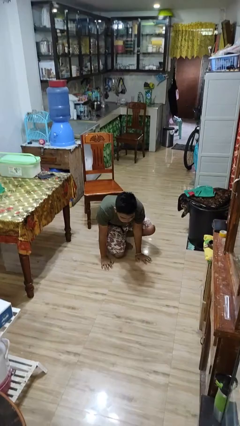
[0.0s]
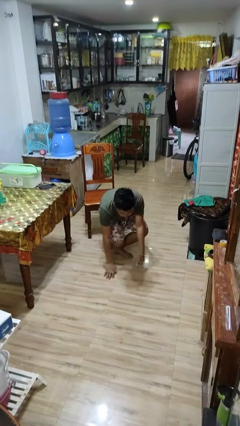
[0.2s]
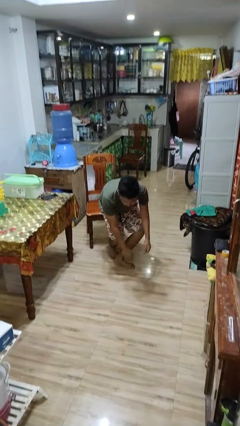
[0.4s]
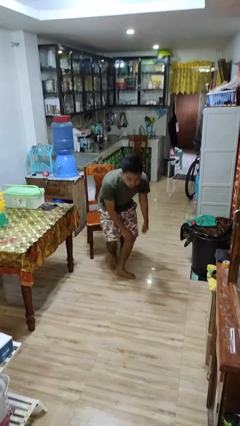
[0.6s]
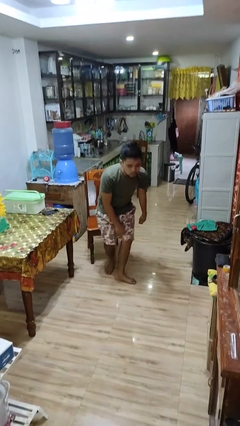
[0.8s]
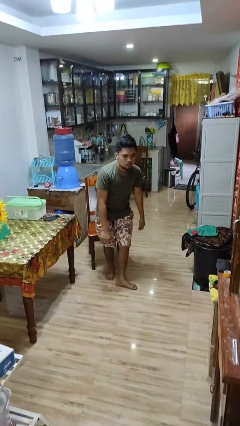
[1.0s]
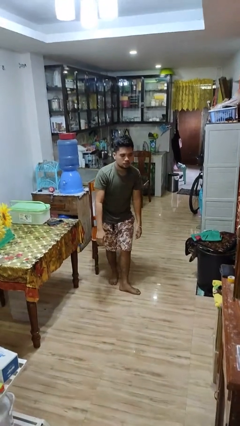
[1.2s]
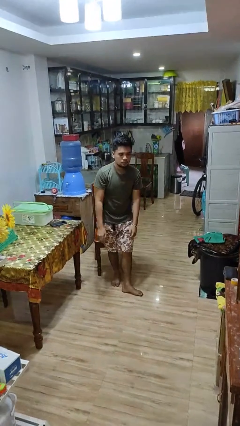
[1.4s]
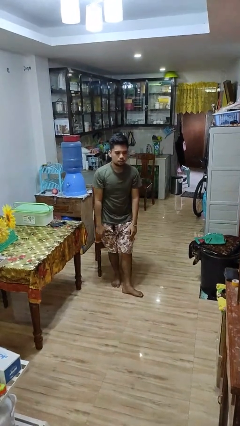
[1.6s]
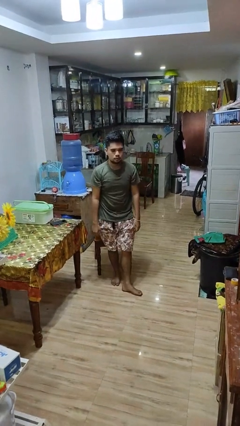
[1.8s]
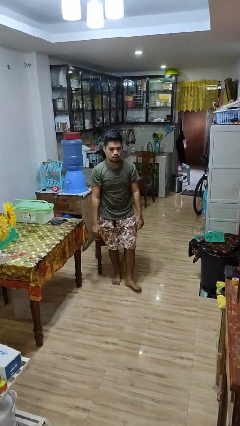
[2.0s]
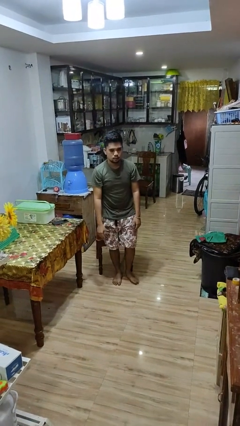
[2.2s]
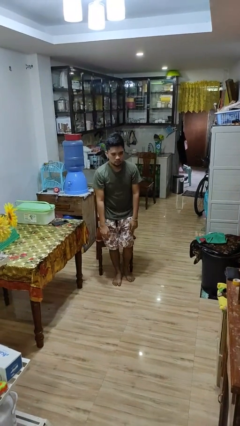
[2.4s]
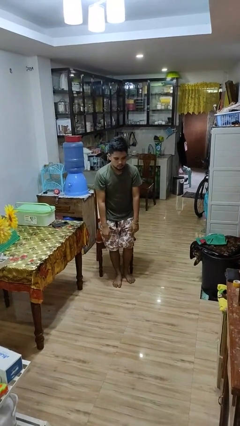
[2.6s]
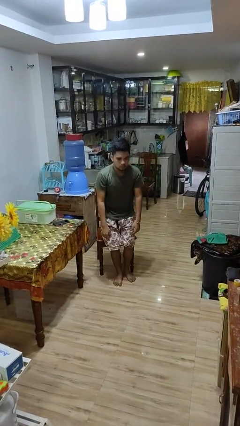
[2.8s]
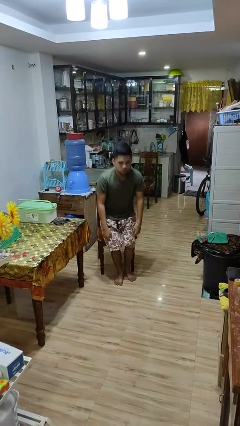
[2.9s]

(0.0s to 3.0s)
person stands up from floor

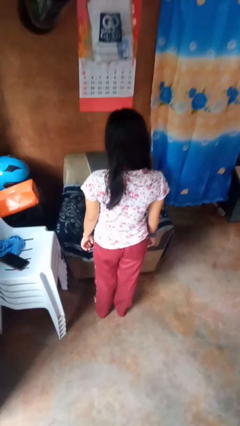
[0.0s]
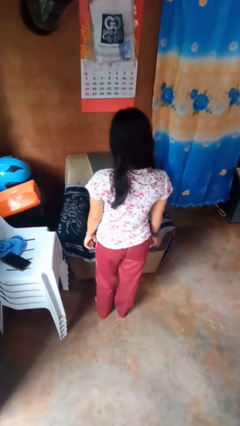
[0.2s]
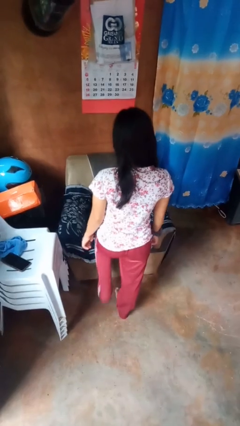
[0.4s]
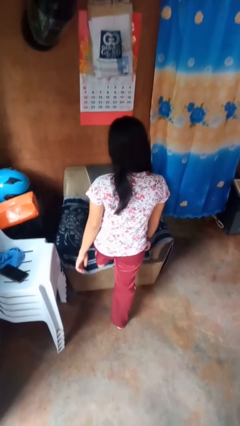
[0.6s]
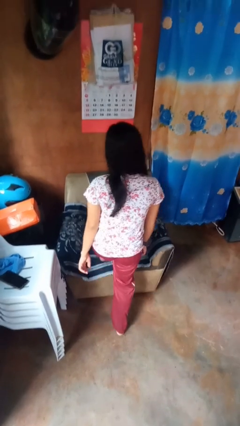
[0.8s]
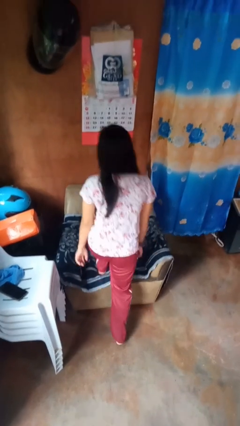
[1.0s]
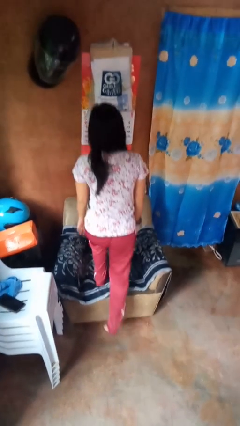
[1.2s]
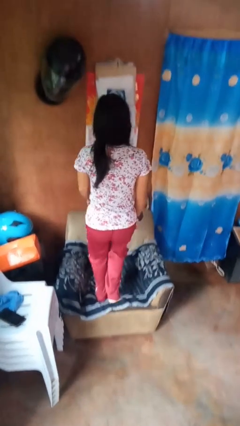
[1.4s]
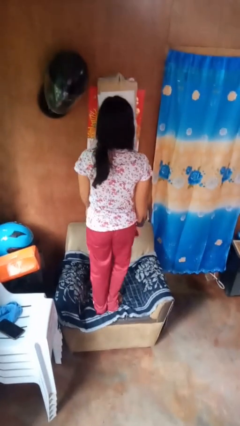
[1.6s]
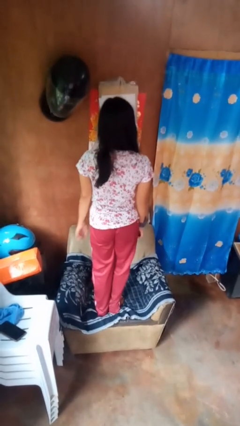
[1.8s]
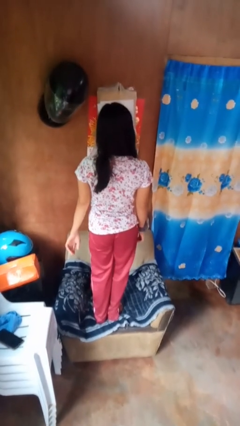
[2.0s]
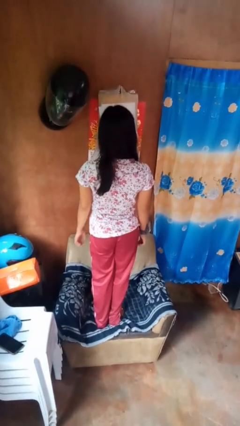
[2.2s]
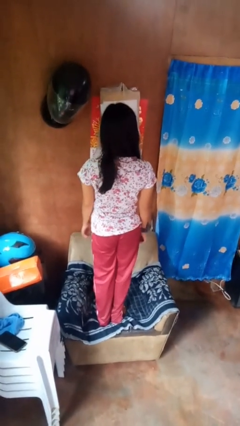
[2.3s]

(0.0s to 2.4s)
person climbs on couch

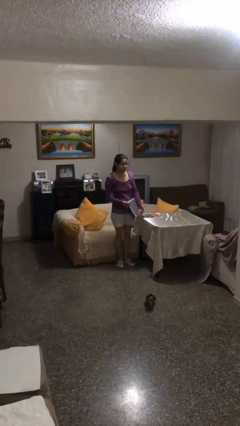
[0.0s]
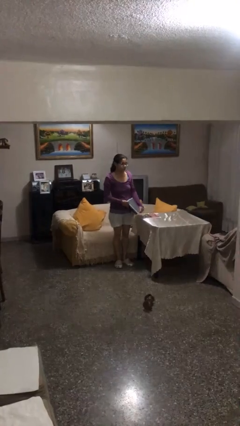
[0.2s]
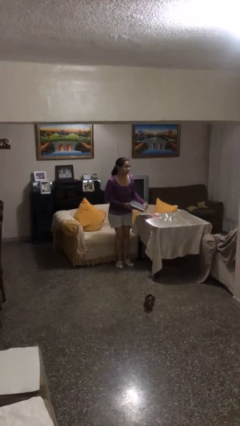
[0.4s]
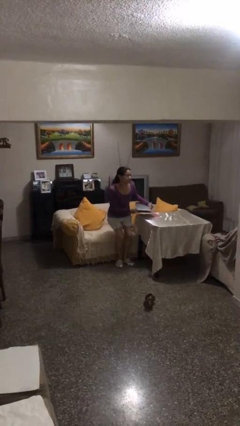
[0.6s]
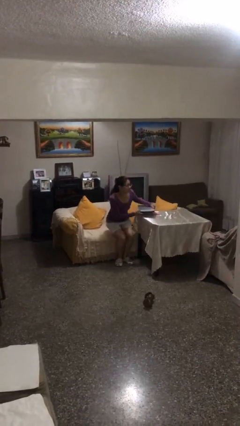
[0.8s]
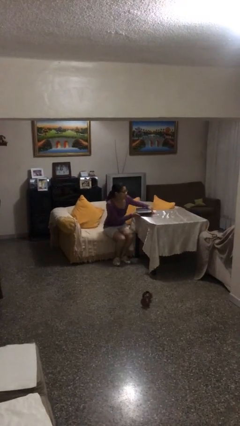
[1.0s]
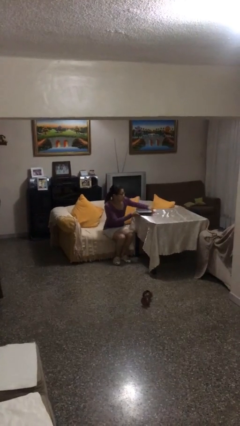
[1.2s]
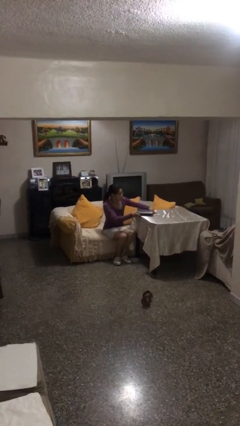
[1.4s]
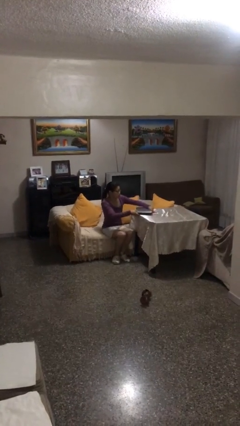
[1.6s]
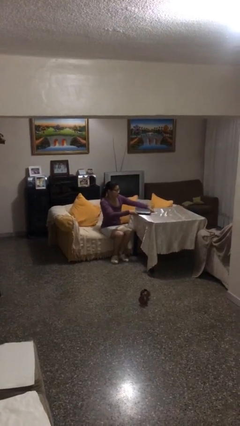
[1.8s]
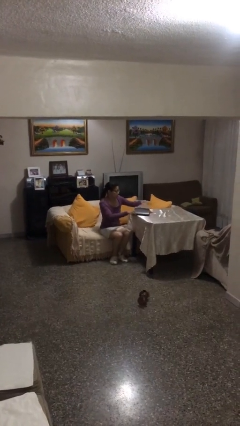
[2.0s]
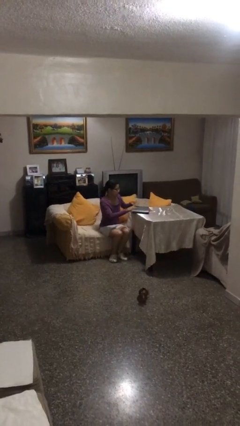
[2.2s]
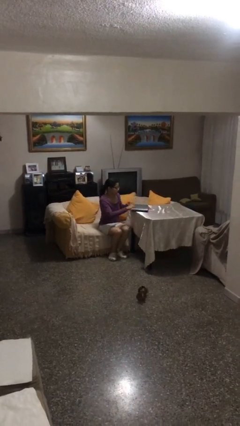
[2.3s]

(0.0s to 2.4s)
person sits down

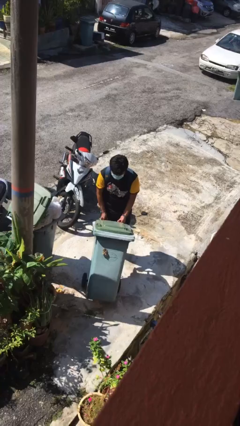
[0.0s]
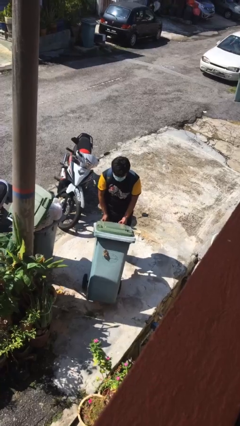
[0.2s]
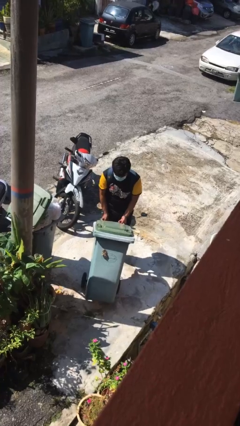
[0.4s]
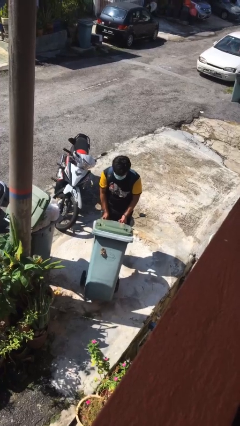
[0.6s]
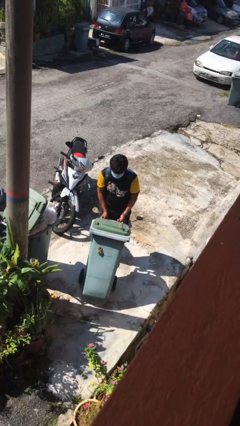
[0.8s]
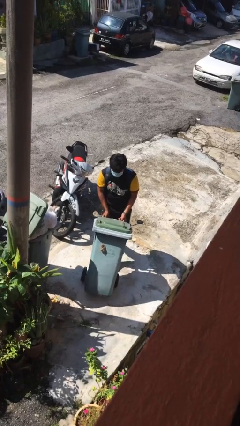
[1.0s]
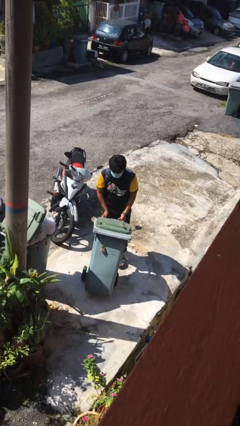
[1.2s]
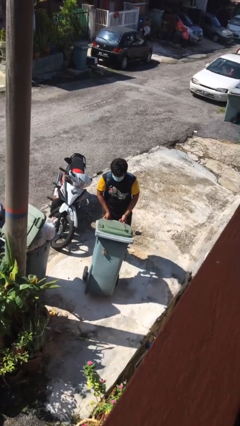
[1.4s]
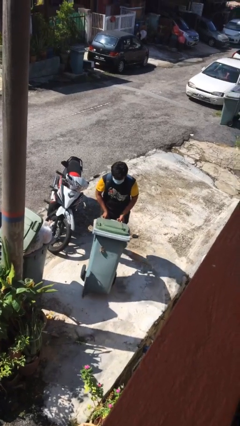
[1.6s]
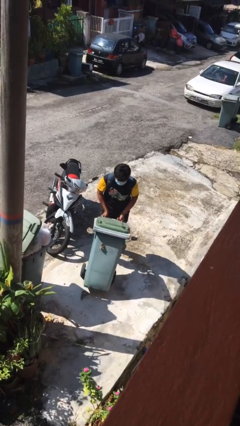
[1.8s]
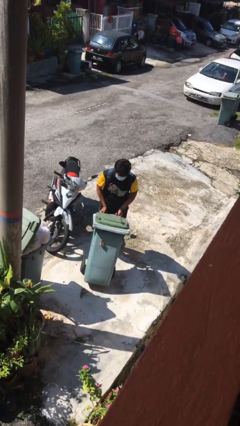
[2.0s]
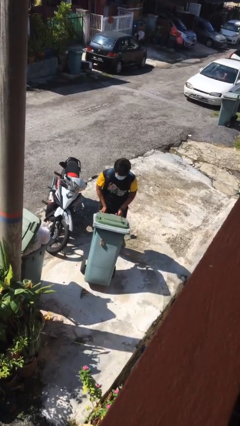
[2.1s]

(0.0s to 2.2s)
person pulls wheeled trashcan

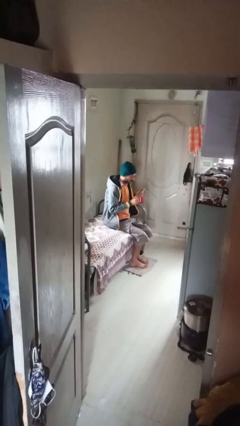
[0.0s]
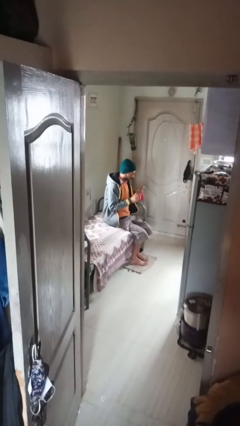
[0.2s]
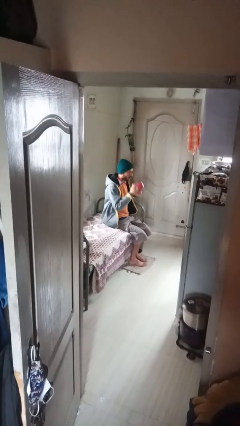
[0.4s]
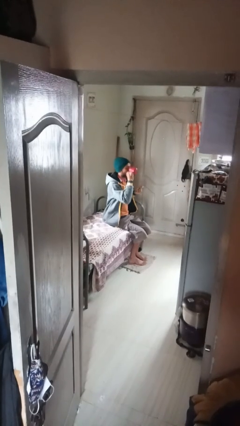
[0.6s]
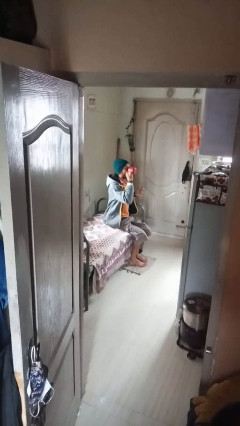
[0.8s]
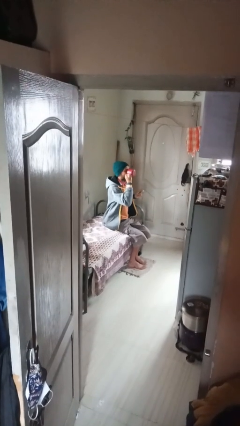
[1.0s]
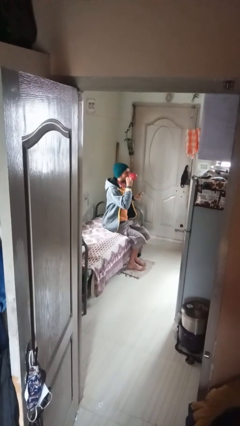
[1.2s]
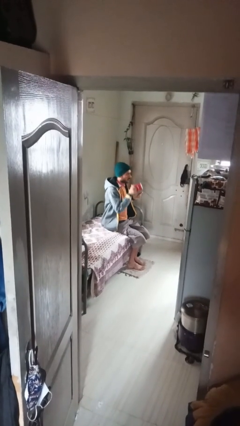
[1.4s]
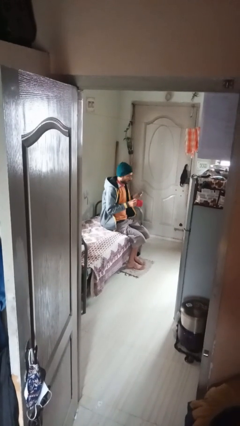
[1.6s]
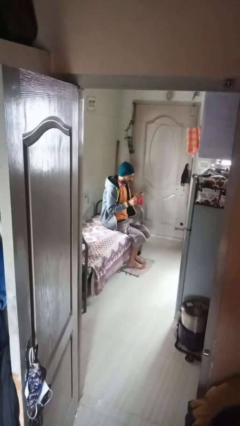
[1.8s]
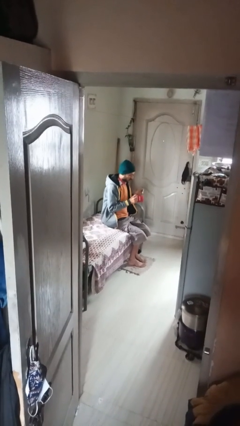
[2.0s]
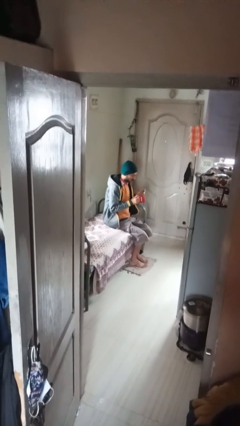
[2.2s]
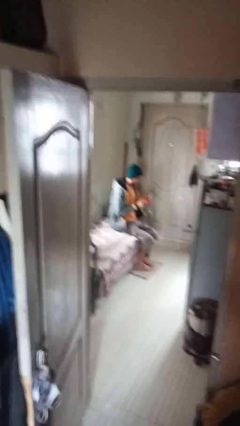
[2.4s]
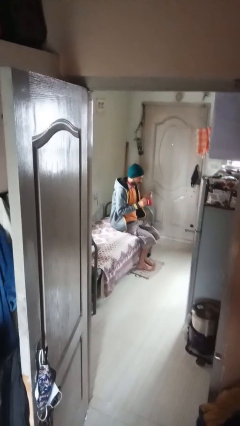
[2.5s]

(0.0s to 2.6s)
person drinks from mug

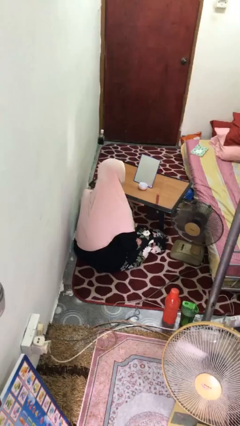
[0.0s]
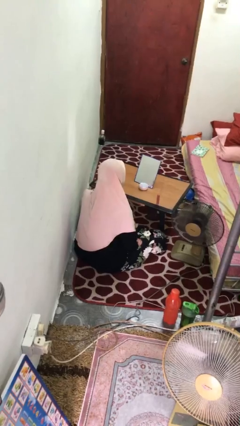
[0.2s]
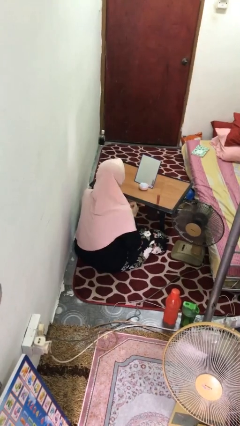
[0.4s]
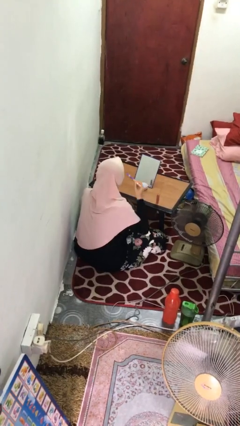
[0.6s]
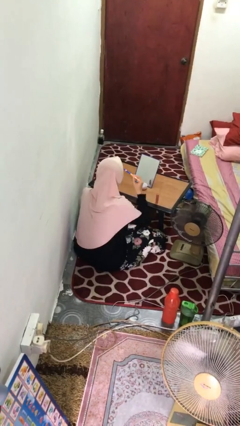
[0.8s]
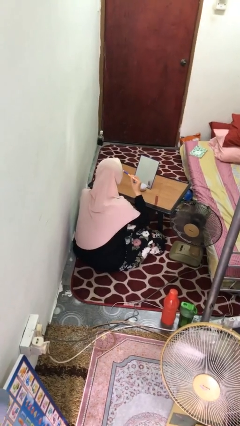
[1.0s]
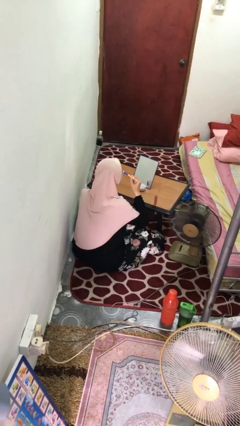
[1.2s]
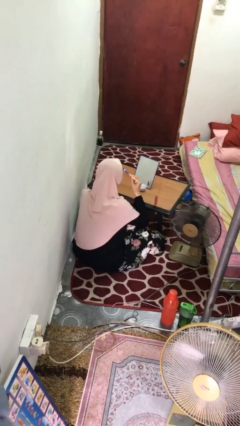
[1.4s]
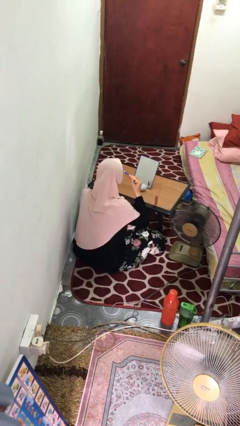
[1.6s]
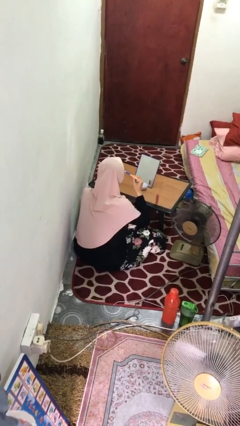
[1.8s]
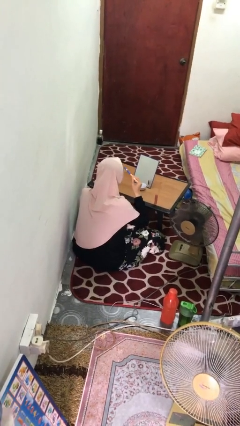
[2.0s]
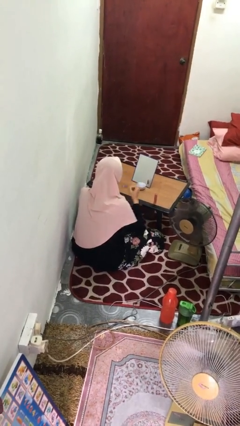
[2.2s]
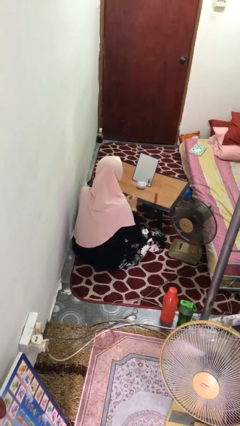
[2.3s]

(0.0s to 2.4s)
person applies eye makeup

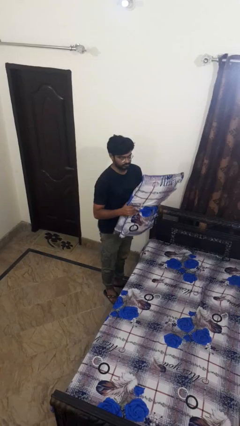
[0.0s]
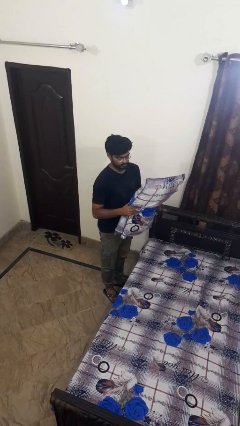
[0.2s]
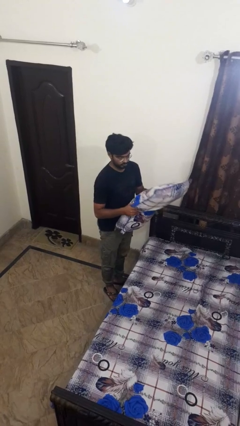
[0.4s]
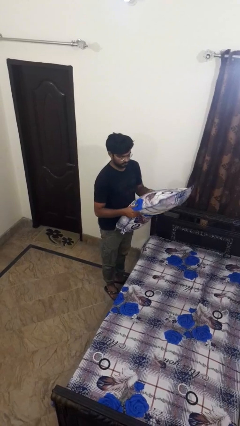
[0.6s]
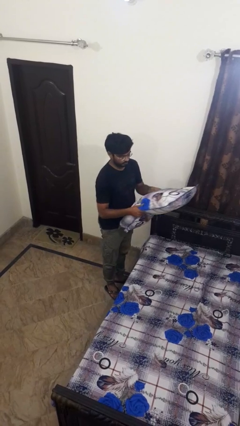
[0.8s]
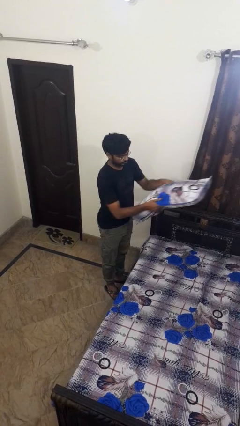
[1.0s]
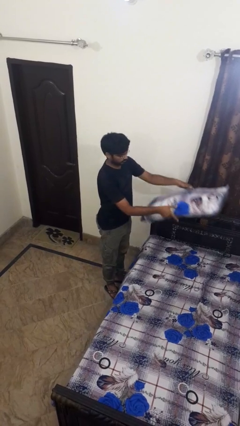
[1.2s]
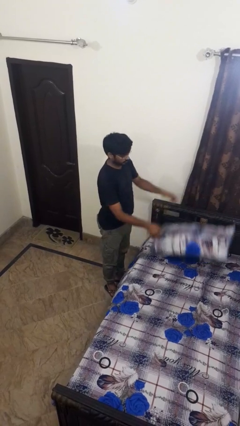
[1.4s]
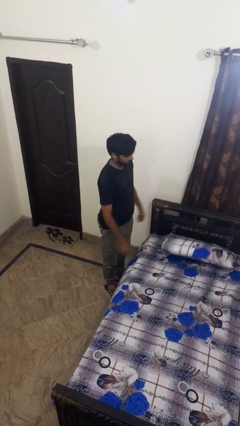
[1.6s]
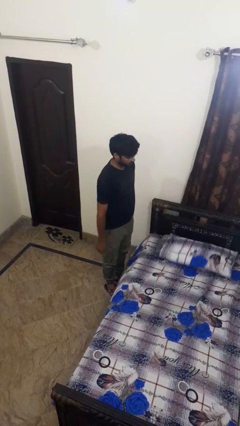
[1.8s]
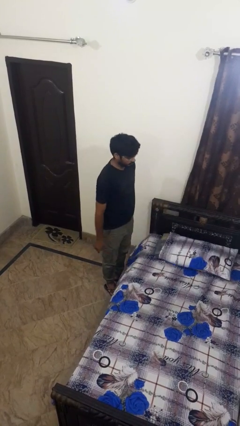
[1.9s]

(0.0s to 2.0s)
person puts down object on bed
